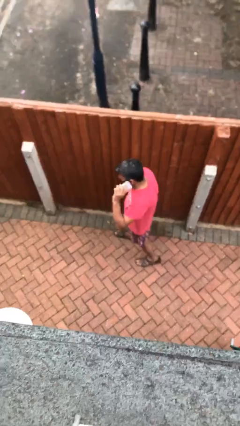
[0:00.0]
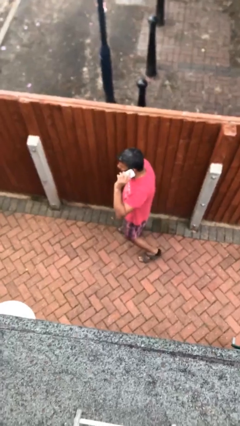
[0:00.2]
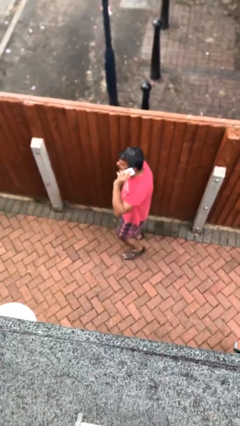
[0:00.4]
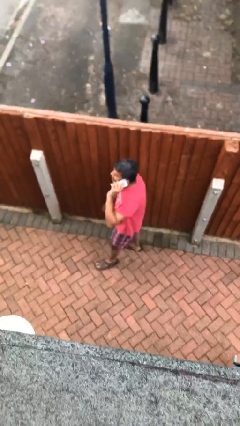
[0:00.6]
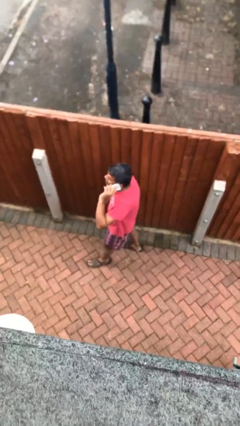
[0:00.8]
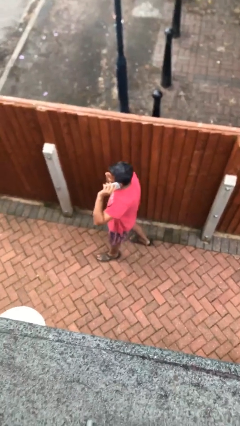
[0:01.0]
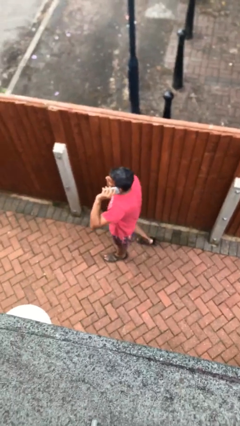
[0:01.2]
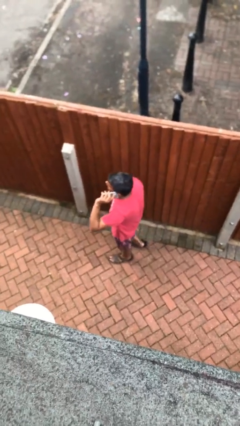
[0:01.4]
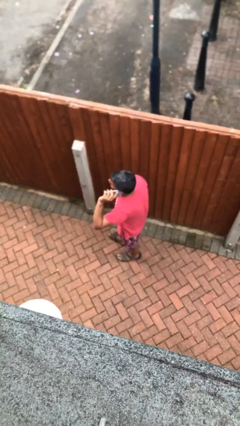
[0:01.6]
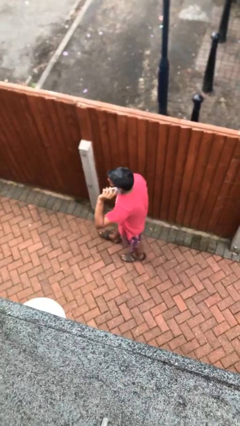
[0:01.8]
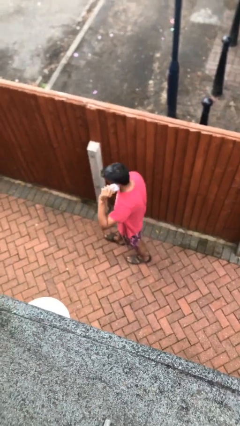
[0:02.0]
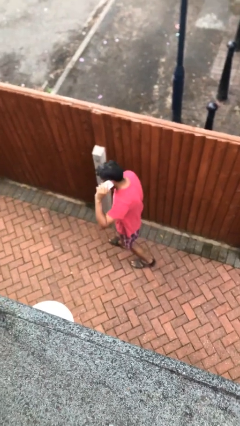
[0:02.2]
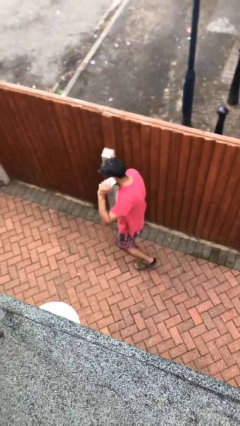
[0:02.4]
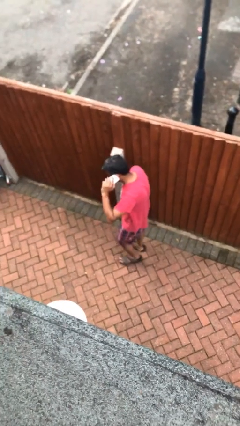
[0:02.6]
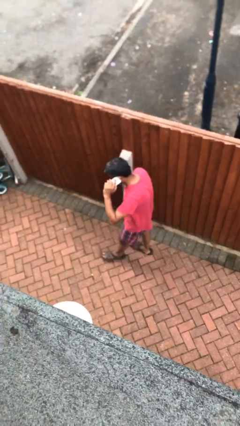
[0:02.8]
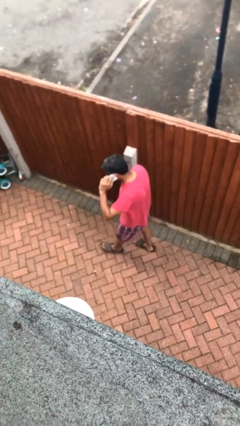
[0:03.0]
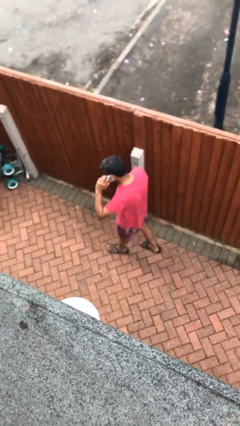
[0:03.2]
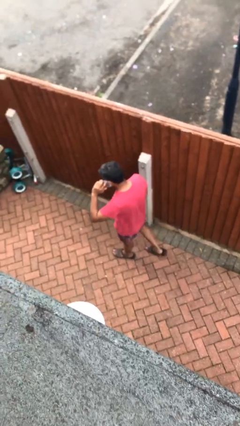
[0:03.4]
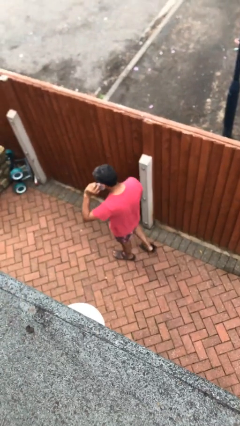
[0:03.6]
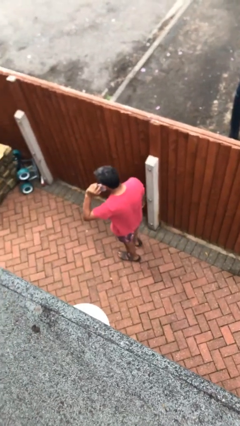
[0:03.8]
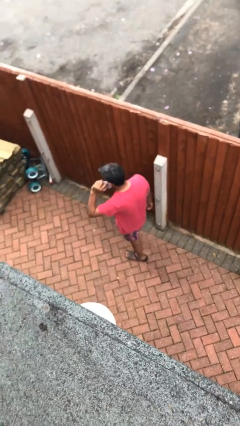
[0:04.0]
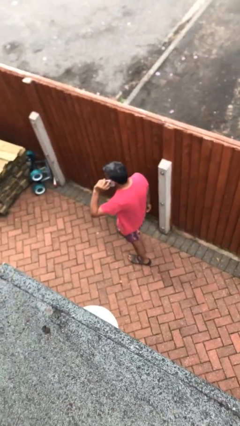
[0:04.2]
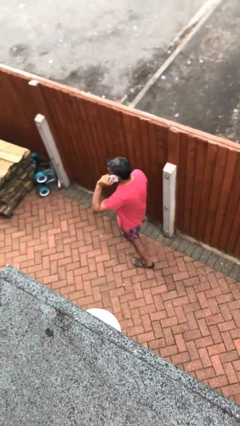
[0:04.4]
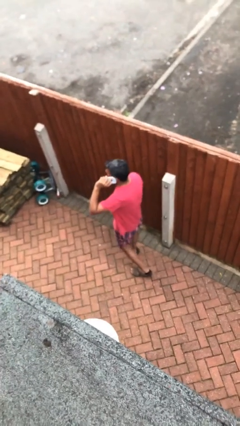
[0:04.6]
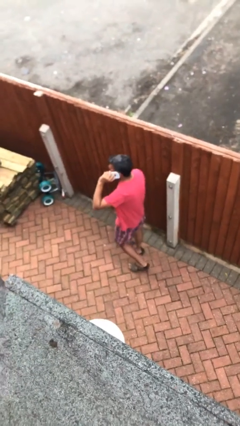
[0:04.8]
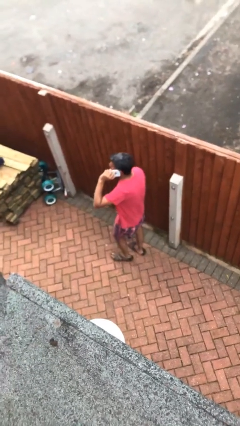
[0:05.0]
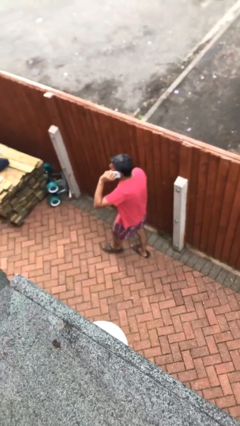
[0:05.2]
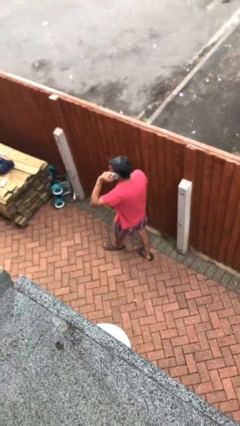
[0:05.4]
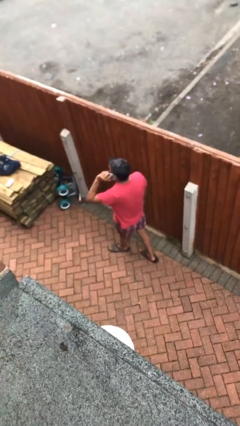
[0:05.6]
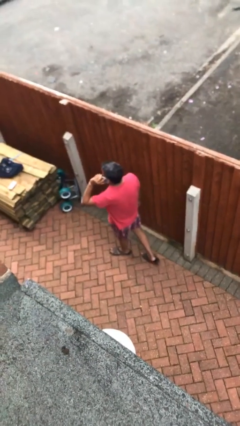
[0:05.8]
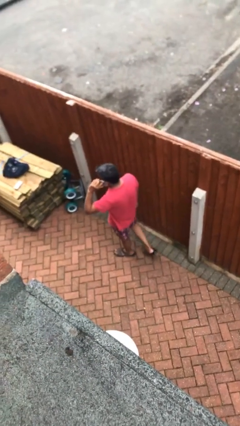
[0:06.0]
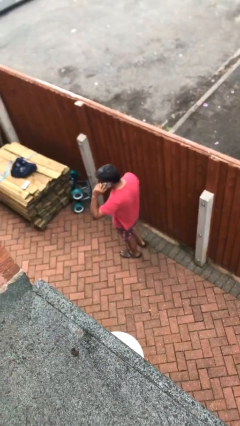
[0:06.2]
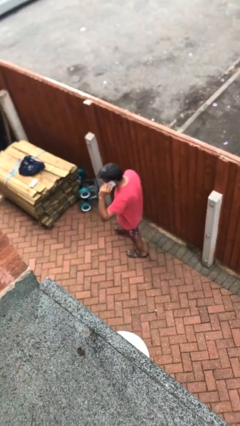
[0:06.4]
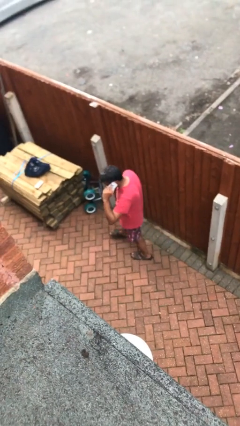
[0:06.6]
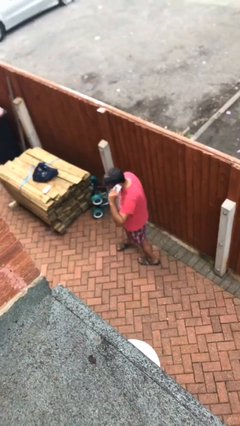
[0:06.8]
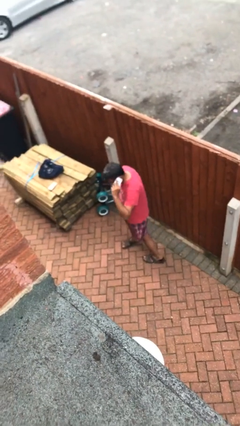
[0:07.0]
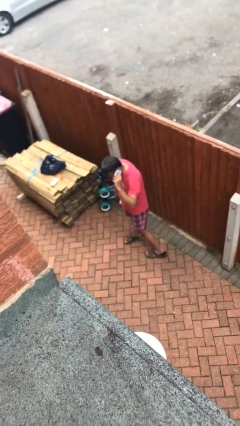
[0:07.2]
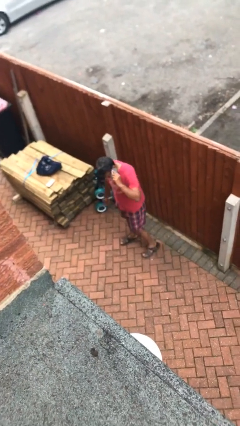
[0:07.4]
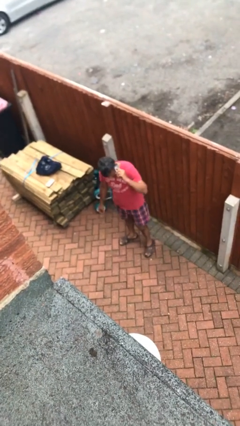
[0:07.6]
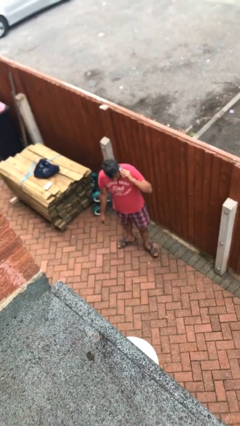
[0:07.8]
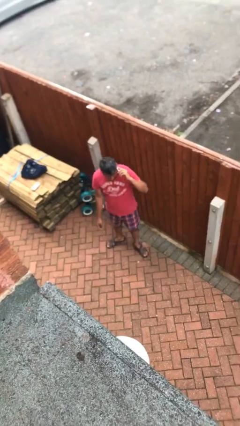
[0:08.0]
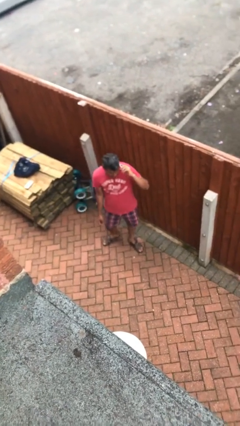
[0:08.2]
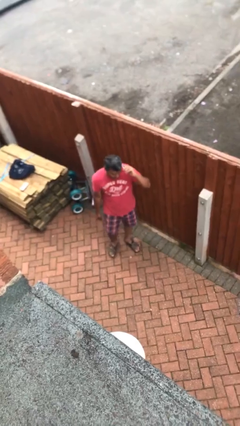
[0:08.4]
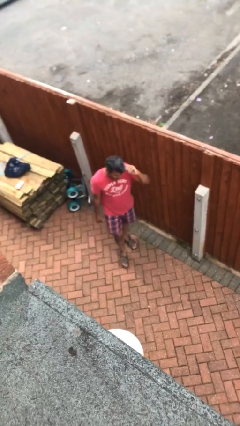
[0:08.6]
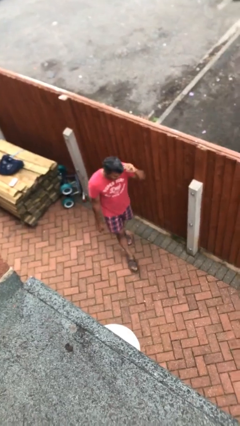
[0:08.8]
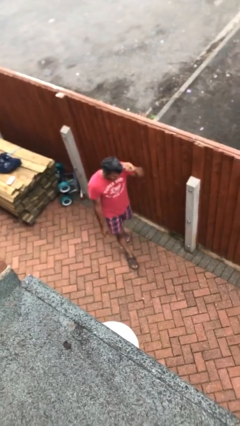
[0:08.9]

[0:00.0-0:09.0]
person talks on phone

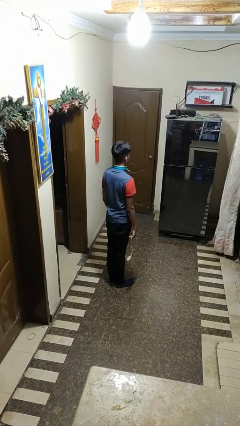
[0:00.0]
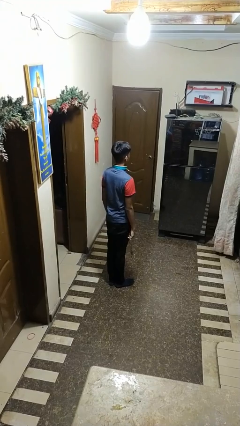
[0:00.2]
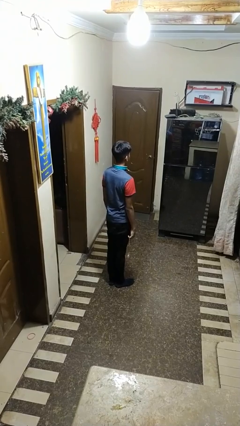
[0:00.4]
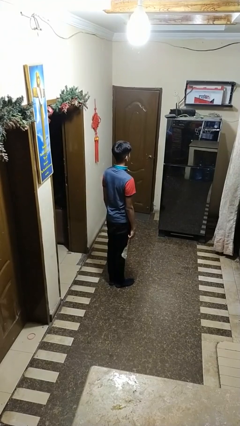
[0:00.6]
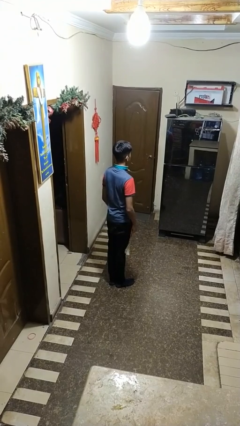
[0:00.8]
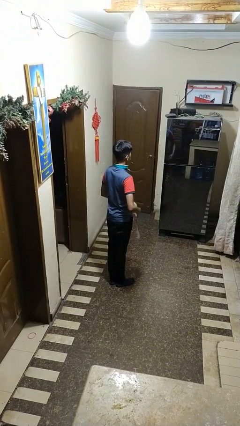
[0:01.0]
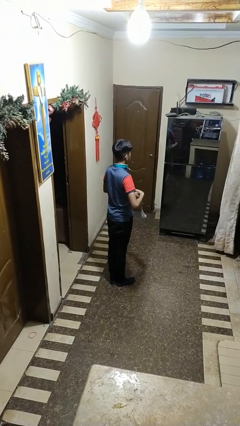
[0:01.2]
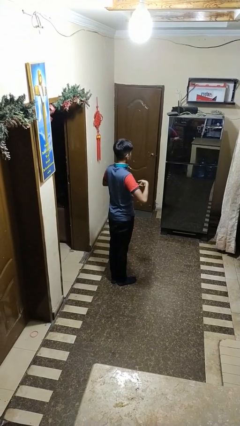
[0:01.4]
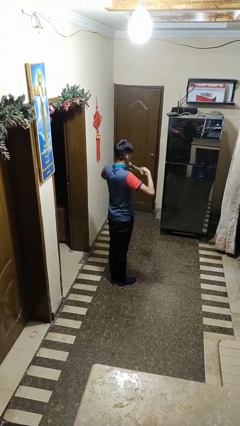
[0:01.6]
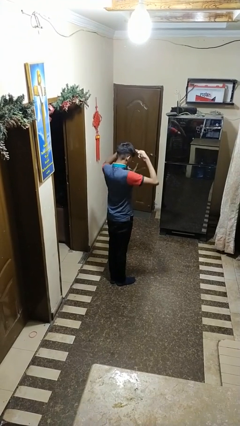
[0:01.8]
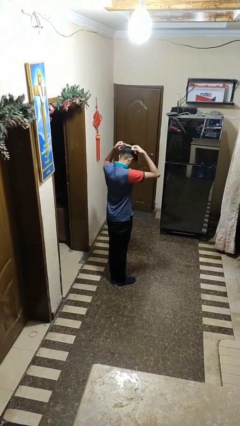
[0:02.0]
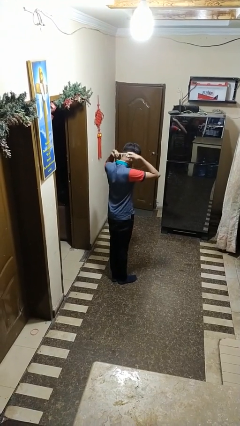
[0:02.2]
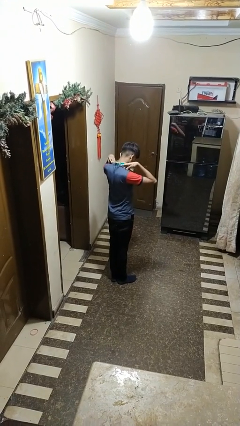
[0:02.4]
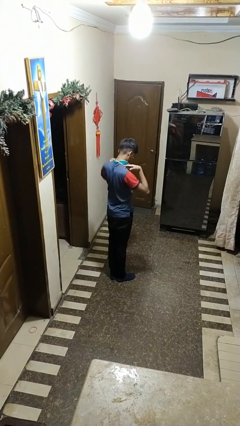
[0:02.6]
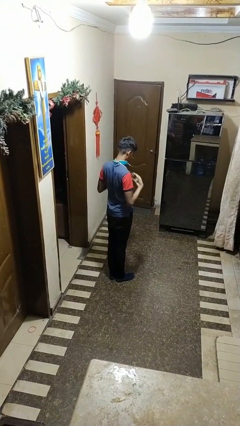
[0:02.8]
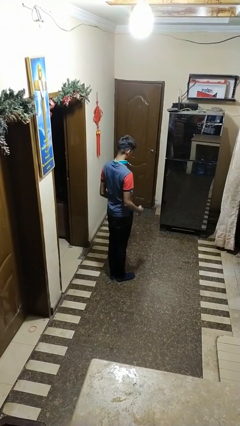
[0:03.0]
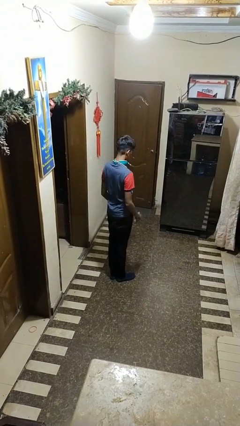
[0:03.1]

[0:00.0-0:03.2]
person puts on necklace

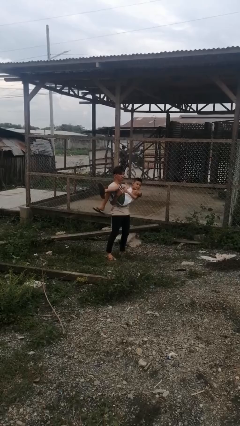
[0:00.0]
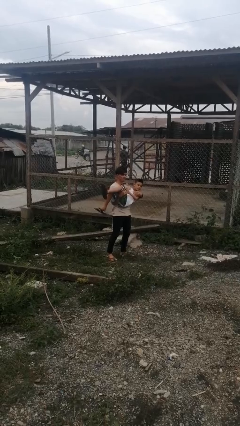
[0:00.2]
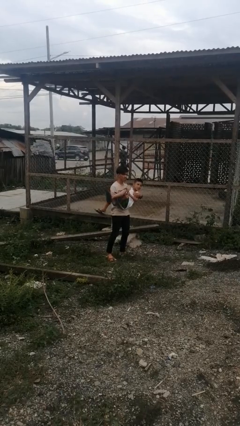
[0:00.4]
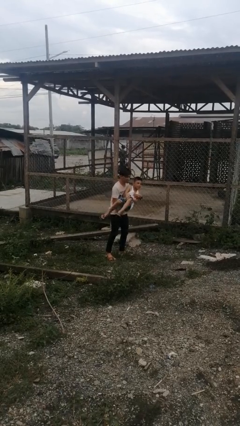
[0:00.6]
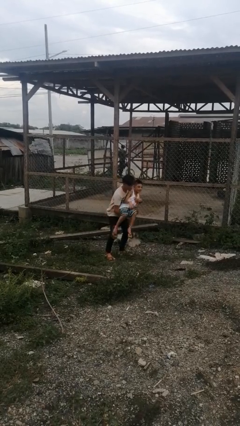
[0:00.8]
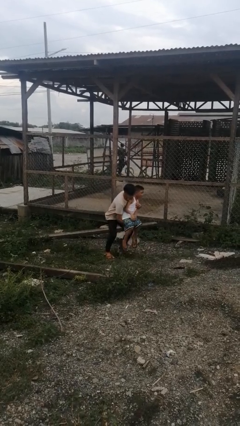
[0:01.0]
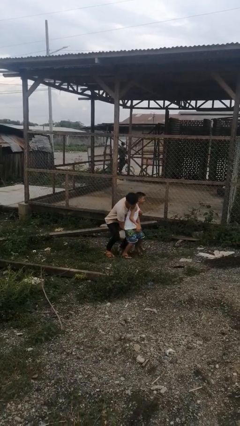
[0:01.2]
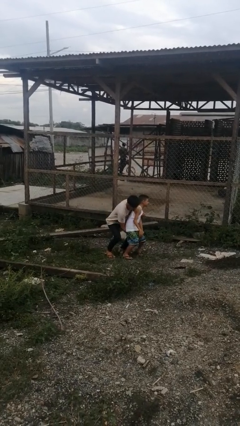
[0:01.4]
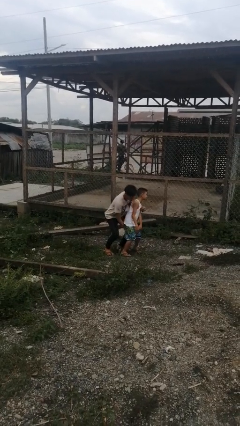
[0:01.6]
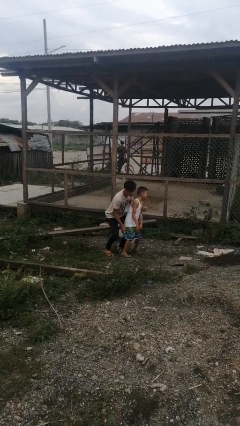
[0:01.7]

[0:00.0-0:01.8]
person puts down person

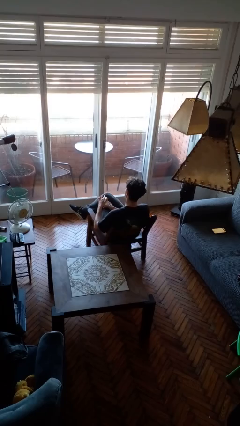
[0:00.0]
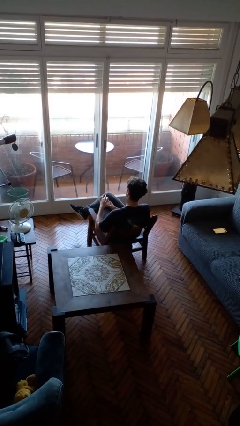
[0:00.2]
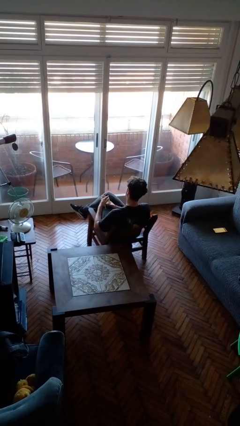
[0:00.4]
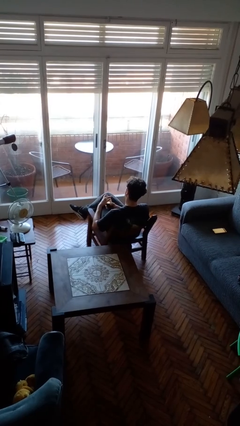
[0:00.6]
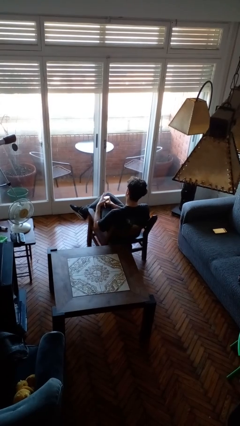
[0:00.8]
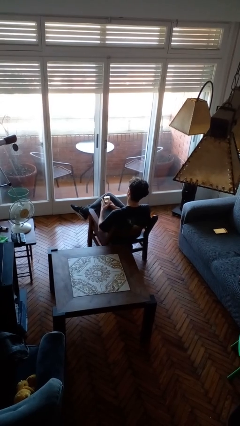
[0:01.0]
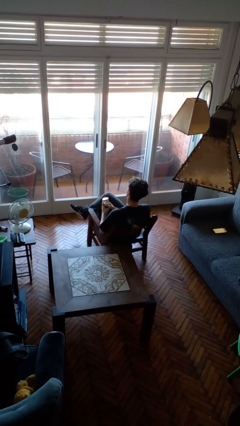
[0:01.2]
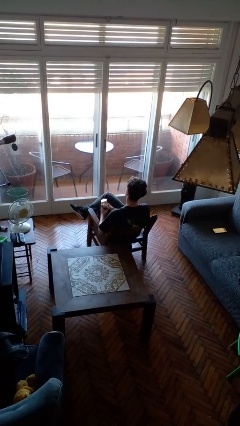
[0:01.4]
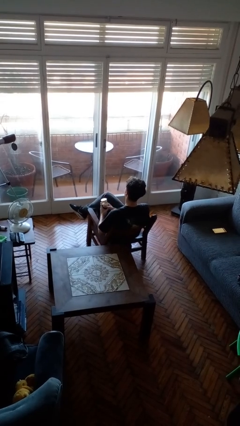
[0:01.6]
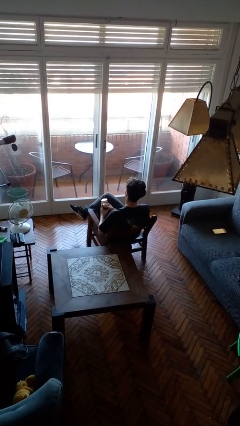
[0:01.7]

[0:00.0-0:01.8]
person closes jar

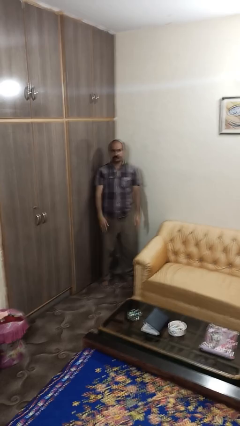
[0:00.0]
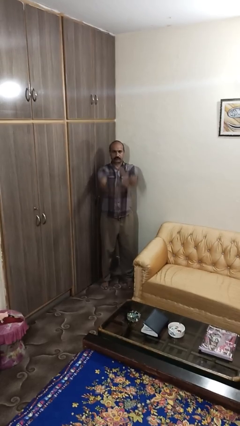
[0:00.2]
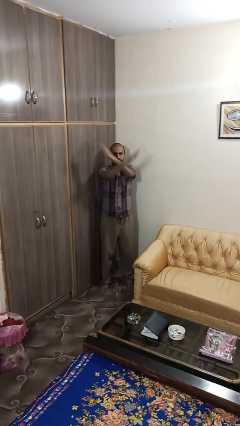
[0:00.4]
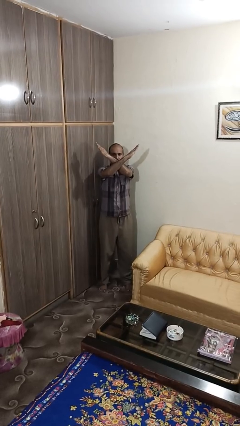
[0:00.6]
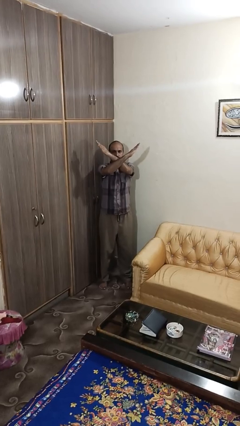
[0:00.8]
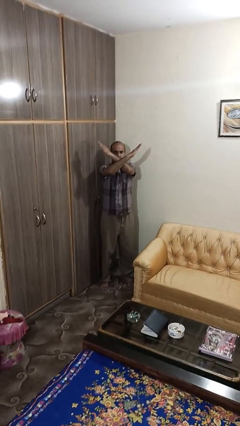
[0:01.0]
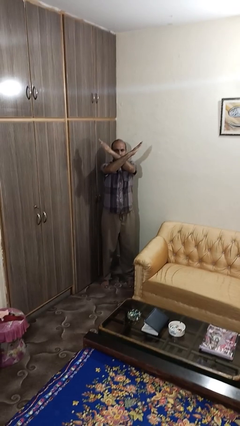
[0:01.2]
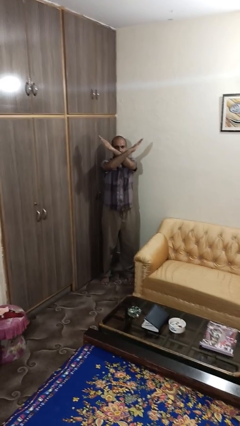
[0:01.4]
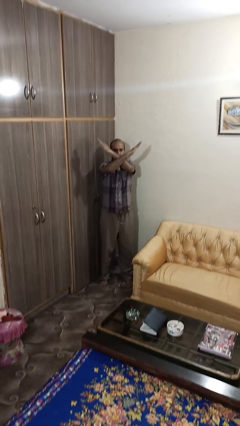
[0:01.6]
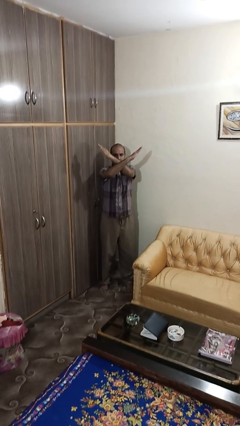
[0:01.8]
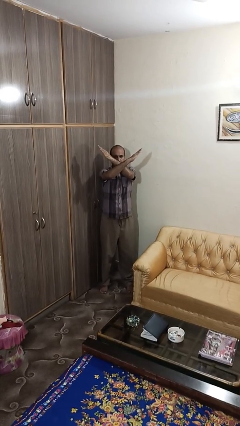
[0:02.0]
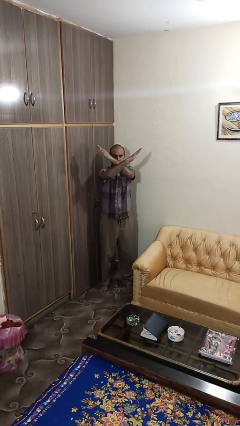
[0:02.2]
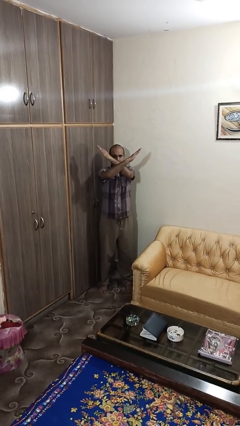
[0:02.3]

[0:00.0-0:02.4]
person gestures arms x
